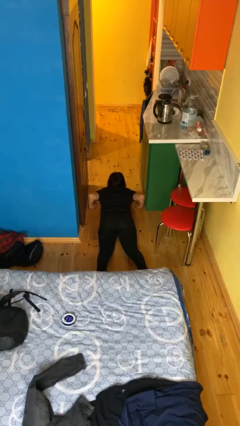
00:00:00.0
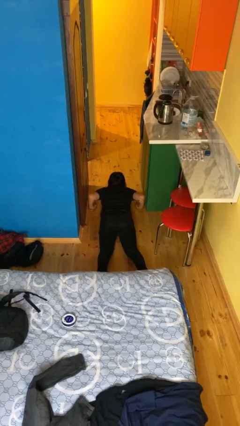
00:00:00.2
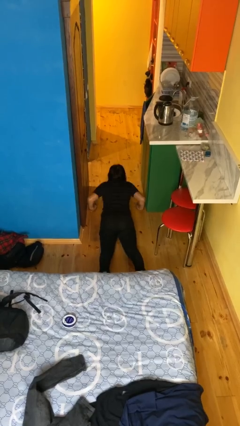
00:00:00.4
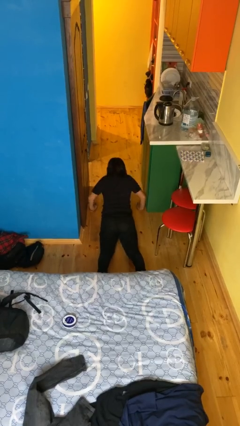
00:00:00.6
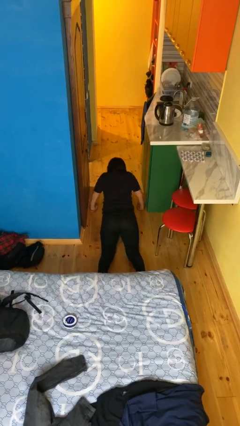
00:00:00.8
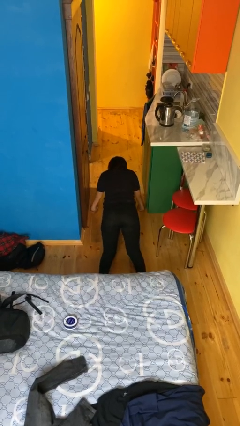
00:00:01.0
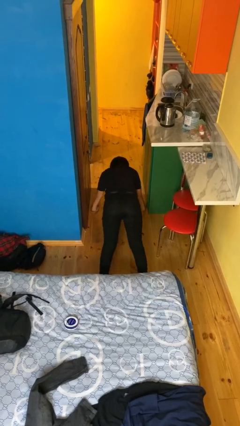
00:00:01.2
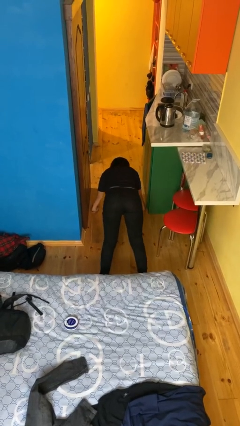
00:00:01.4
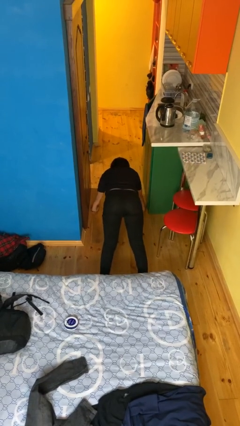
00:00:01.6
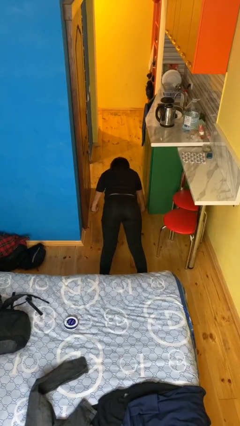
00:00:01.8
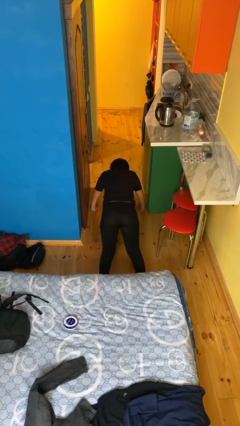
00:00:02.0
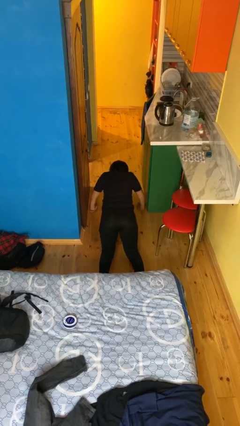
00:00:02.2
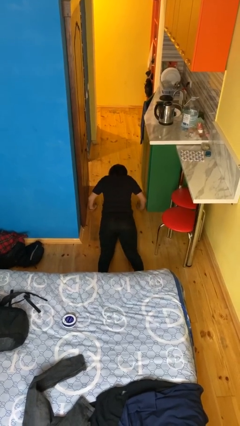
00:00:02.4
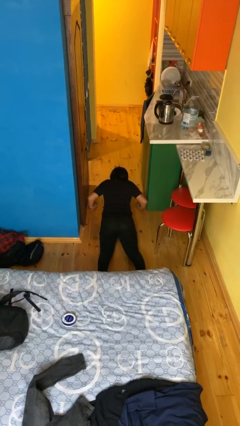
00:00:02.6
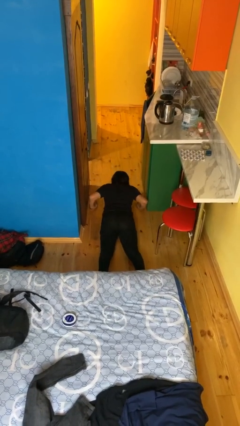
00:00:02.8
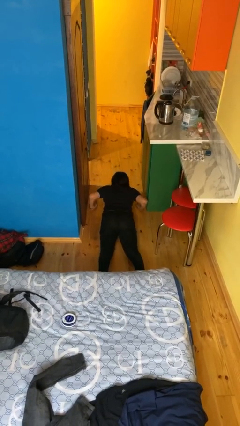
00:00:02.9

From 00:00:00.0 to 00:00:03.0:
person exercises with pushup

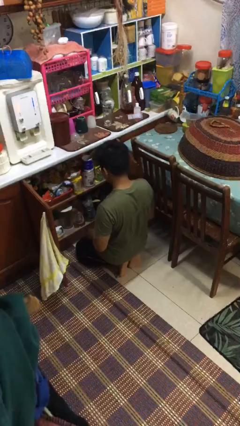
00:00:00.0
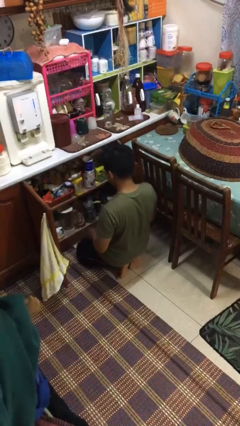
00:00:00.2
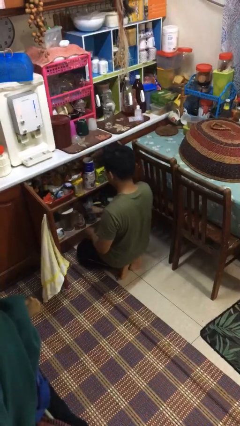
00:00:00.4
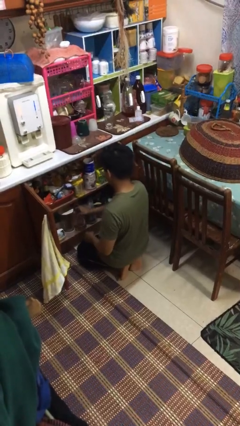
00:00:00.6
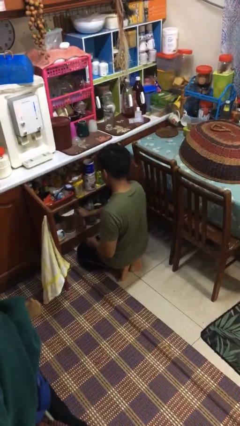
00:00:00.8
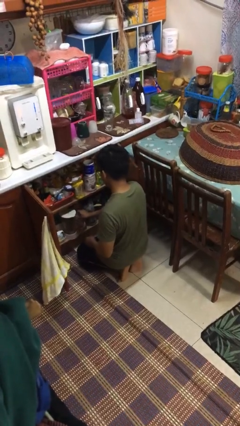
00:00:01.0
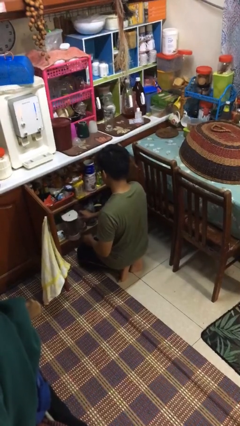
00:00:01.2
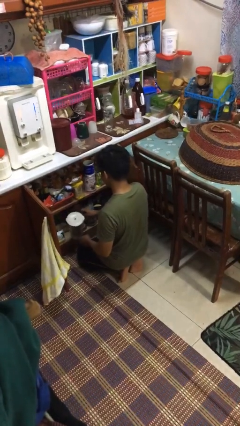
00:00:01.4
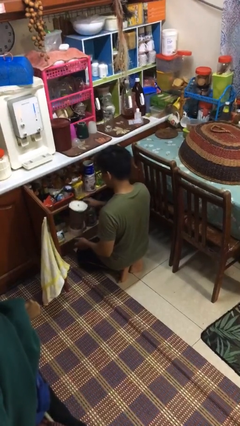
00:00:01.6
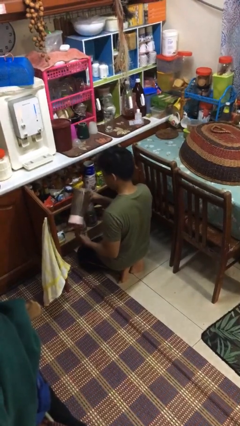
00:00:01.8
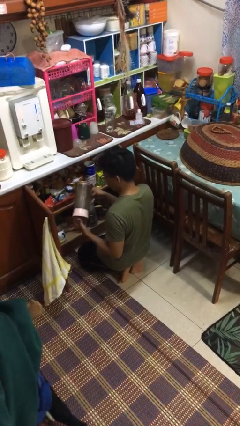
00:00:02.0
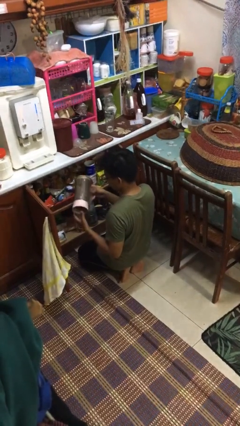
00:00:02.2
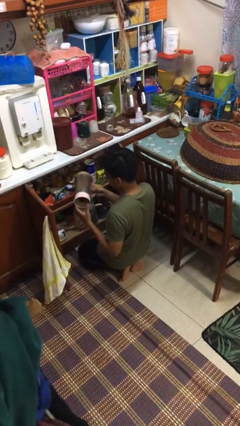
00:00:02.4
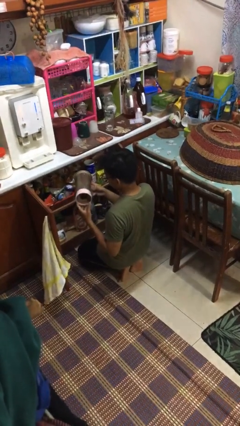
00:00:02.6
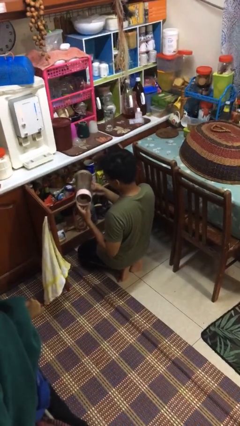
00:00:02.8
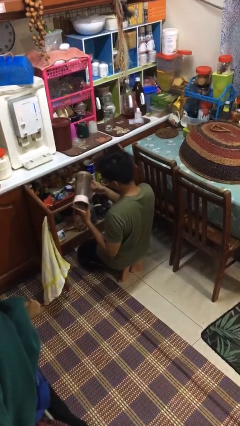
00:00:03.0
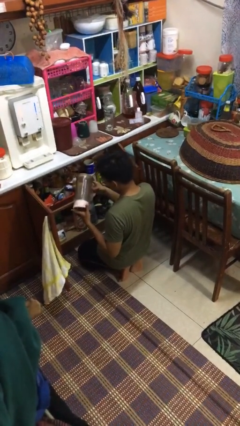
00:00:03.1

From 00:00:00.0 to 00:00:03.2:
person takes object from cabinet

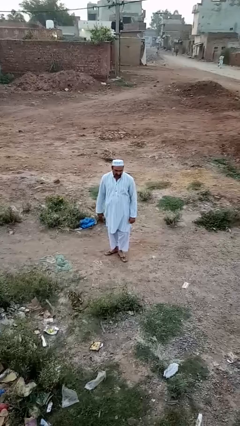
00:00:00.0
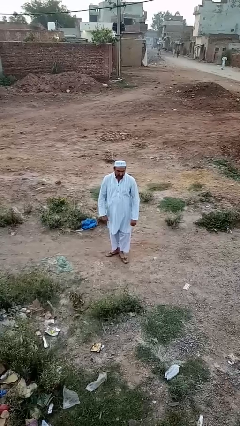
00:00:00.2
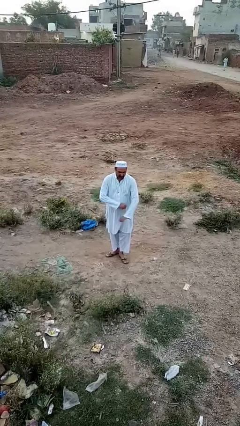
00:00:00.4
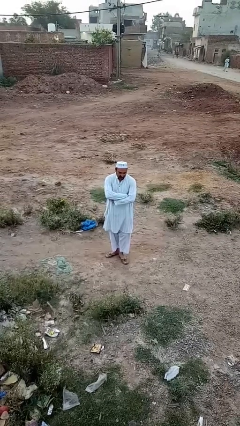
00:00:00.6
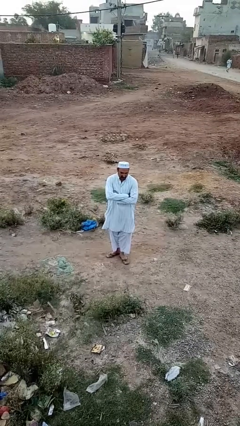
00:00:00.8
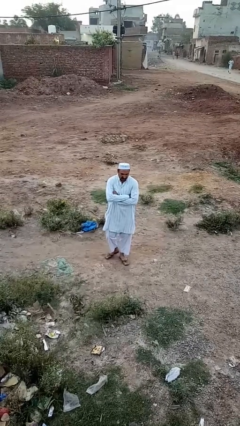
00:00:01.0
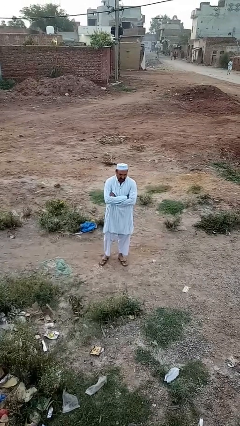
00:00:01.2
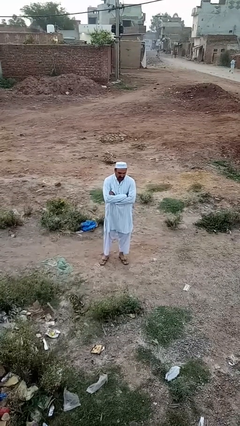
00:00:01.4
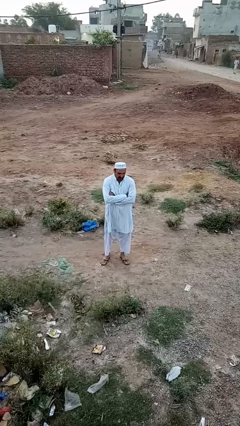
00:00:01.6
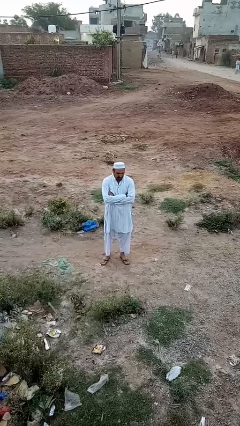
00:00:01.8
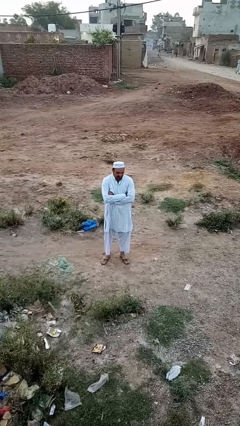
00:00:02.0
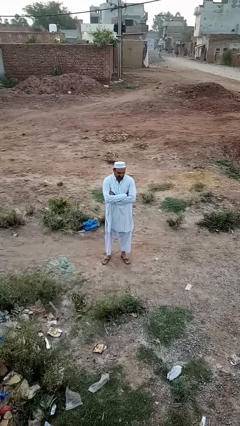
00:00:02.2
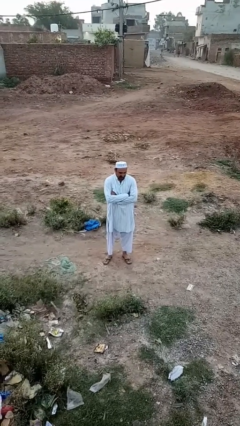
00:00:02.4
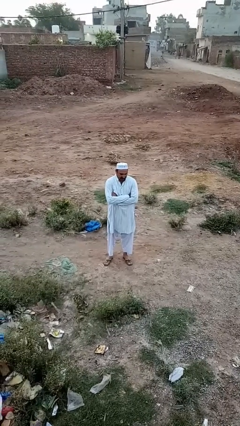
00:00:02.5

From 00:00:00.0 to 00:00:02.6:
person crosses arms

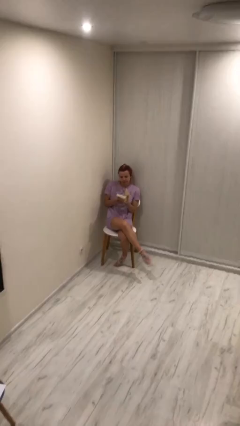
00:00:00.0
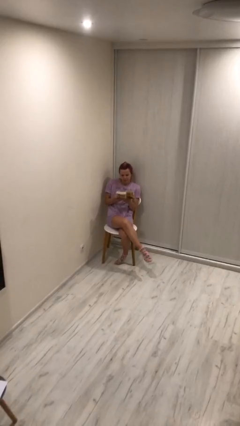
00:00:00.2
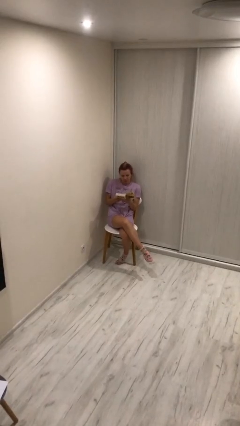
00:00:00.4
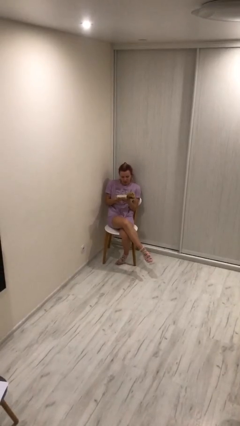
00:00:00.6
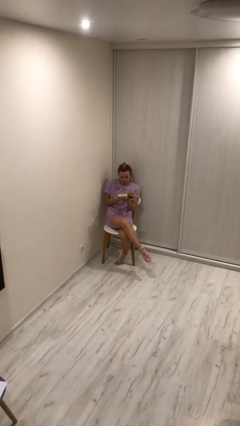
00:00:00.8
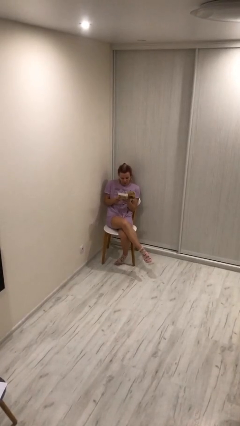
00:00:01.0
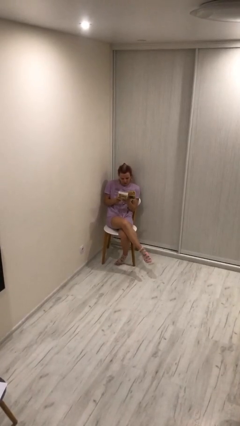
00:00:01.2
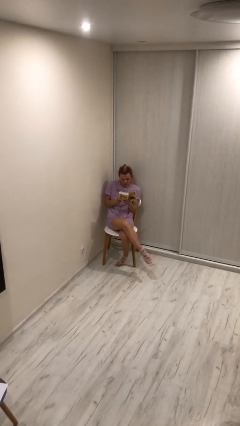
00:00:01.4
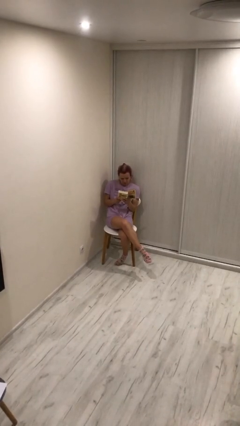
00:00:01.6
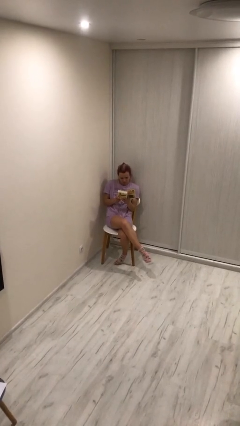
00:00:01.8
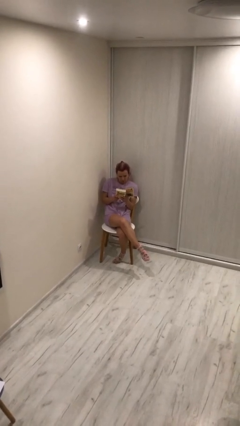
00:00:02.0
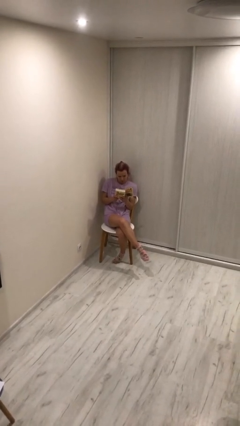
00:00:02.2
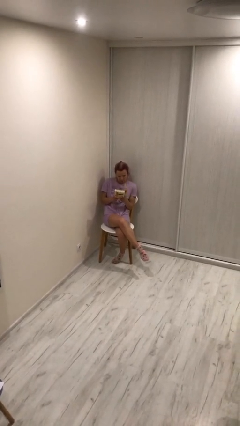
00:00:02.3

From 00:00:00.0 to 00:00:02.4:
person reads book

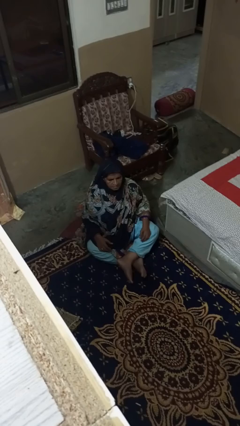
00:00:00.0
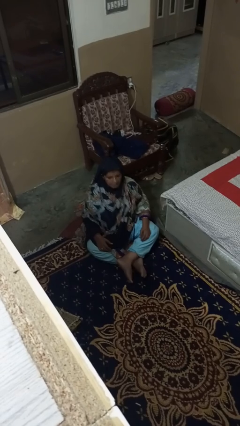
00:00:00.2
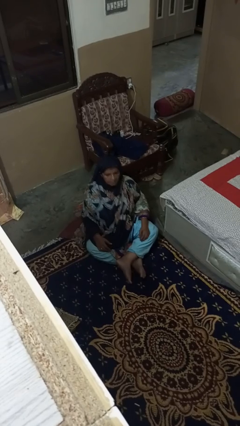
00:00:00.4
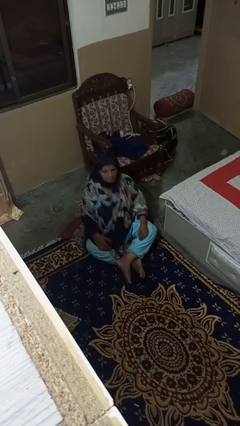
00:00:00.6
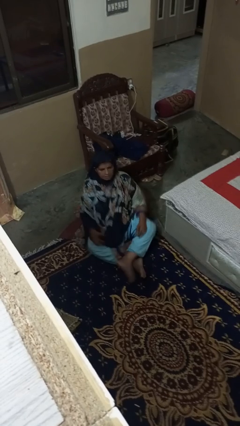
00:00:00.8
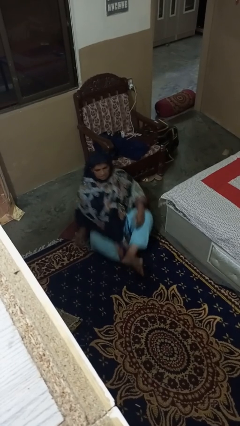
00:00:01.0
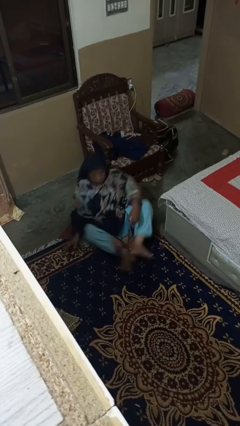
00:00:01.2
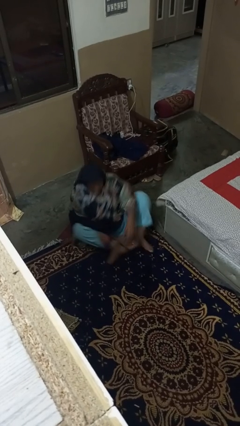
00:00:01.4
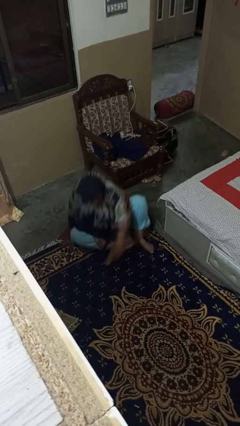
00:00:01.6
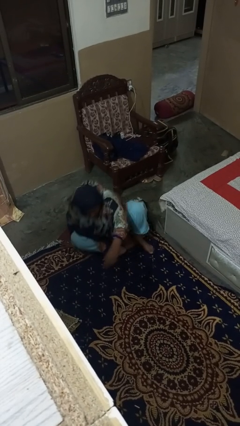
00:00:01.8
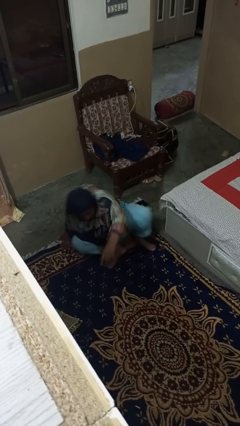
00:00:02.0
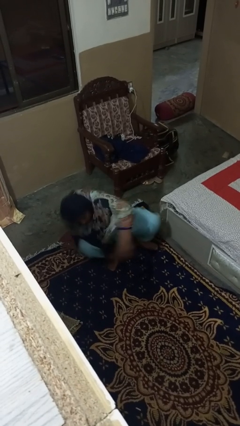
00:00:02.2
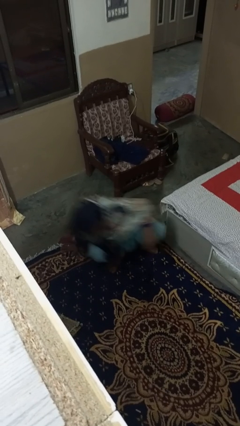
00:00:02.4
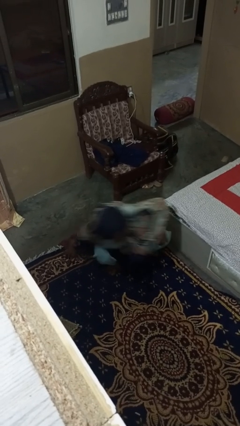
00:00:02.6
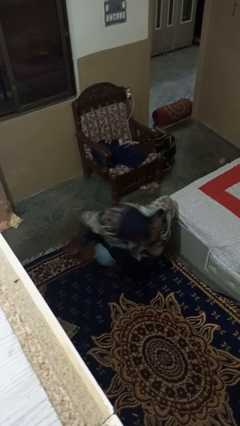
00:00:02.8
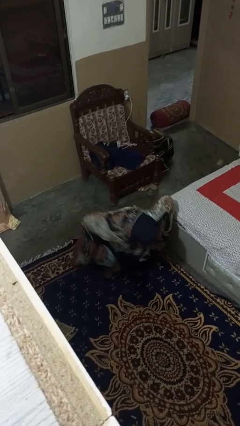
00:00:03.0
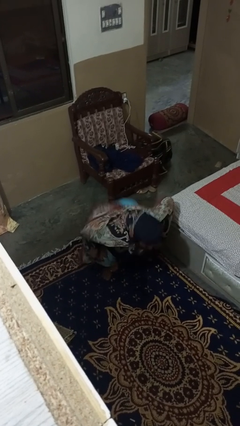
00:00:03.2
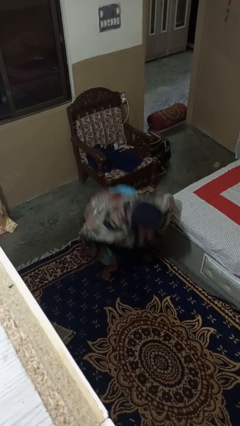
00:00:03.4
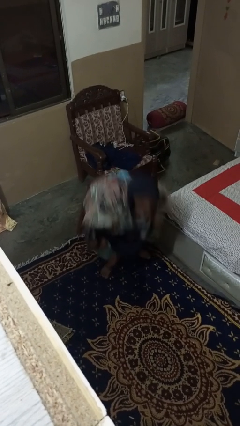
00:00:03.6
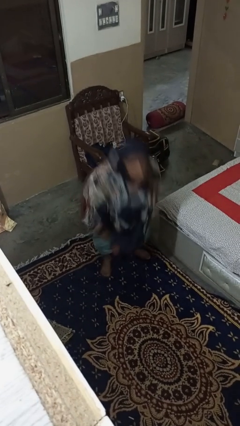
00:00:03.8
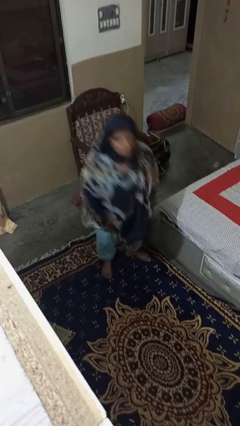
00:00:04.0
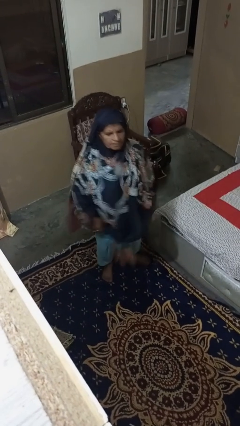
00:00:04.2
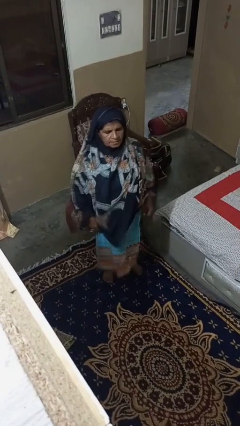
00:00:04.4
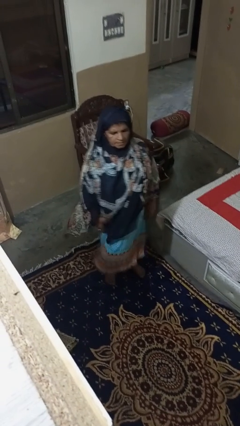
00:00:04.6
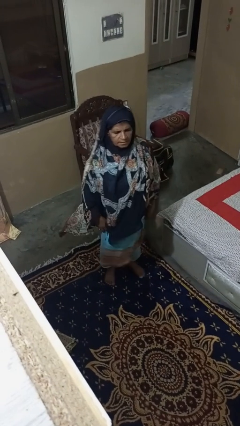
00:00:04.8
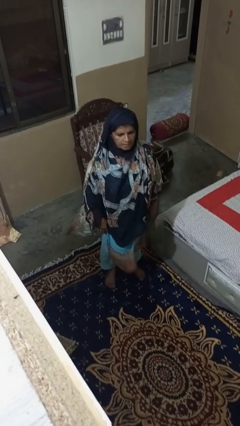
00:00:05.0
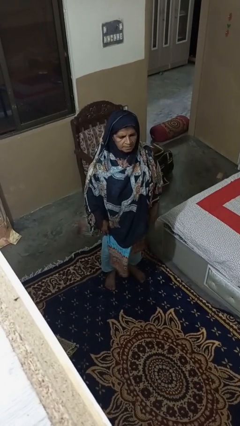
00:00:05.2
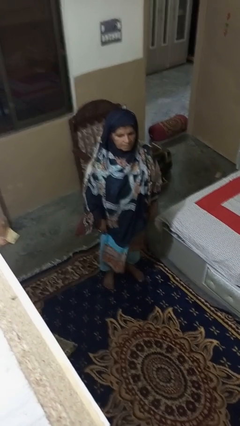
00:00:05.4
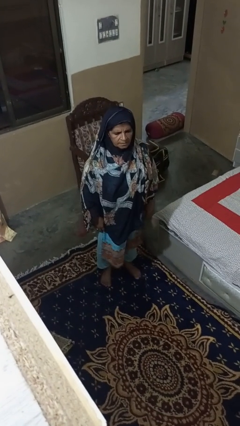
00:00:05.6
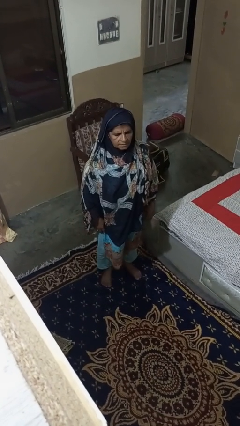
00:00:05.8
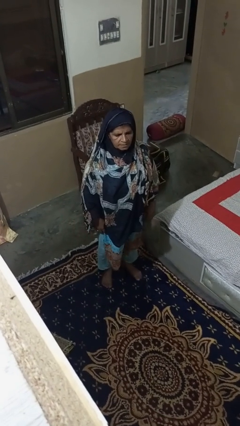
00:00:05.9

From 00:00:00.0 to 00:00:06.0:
person stands up from floor
